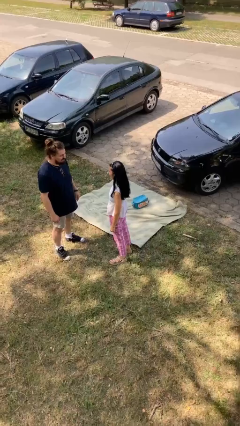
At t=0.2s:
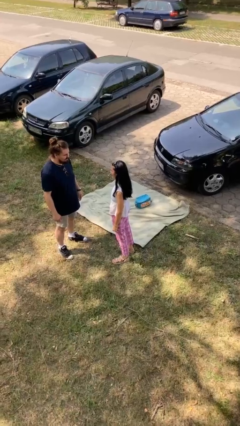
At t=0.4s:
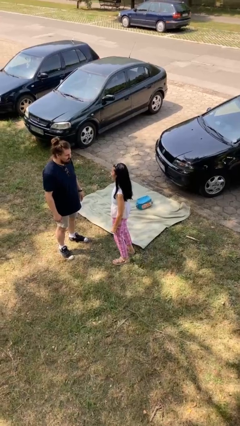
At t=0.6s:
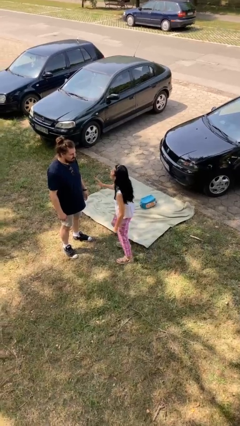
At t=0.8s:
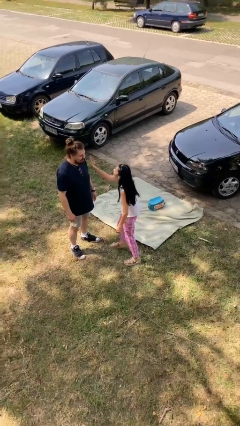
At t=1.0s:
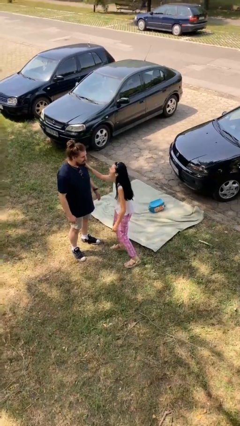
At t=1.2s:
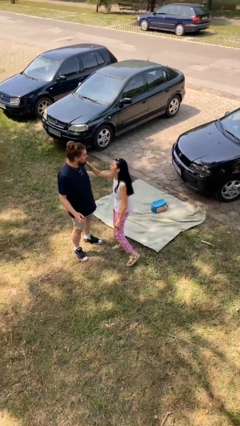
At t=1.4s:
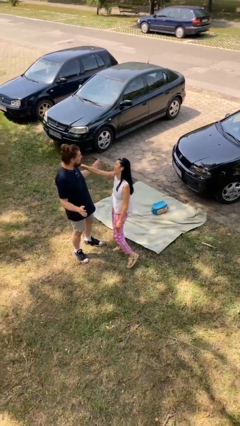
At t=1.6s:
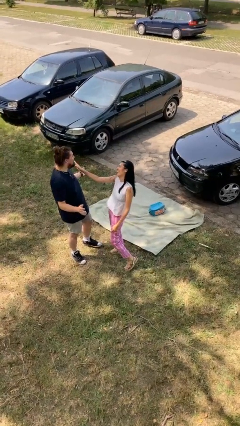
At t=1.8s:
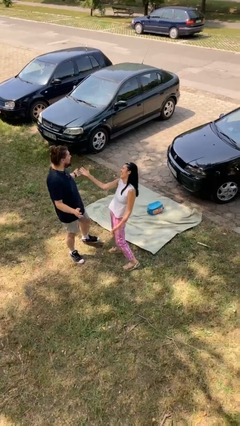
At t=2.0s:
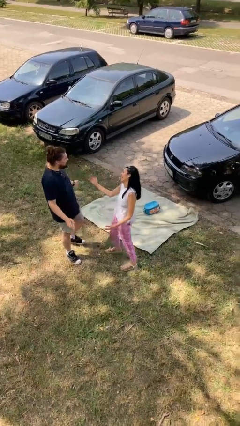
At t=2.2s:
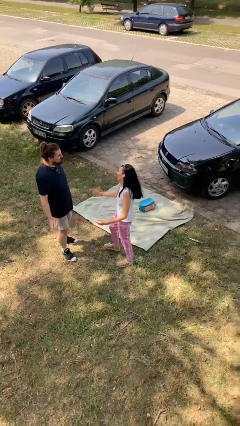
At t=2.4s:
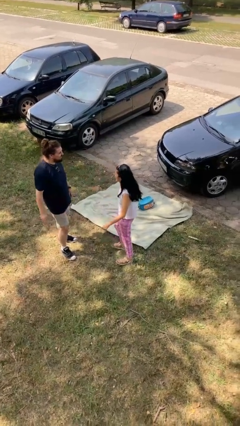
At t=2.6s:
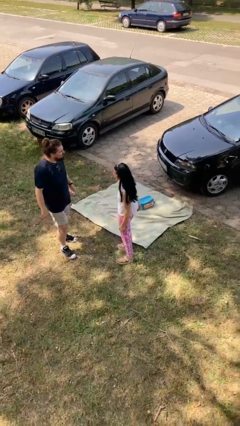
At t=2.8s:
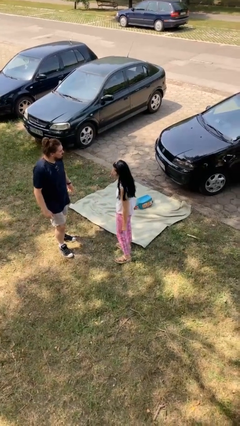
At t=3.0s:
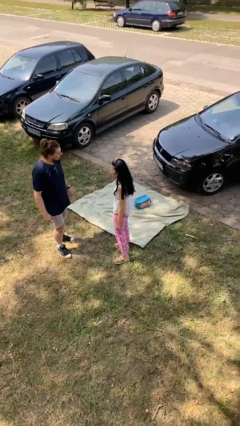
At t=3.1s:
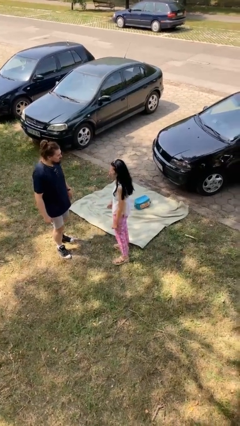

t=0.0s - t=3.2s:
person shoves person

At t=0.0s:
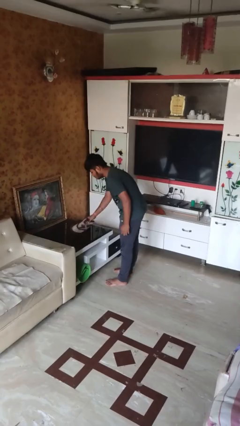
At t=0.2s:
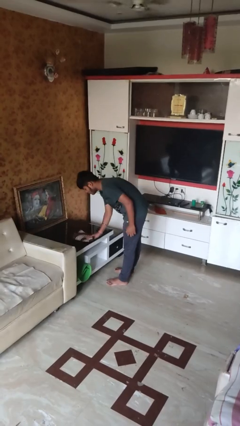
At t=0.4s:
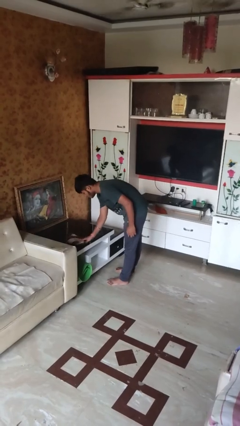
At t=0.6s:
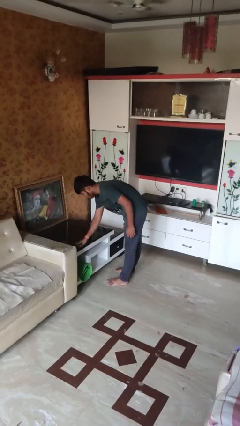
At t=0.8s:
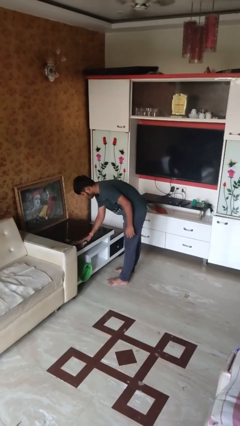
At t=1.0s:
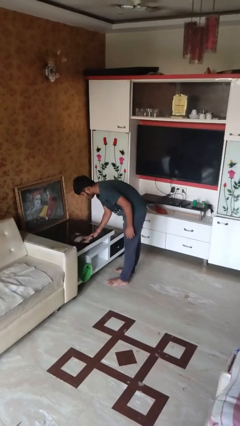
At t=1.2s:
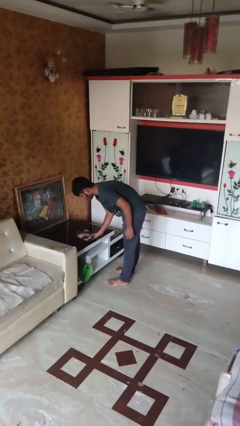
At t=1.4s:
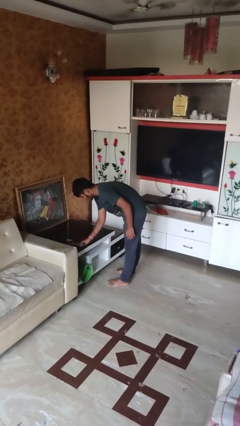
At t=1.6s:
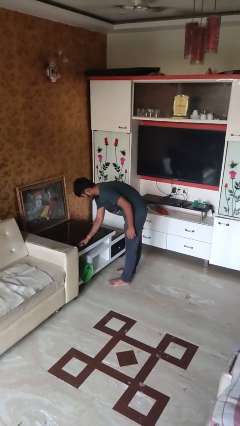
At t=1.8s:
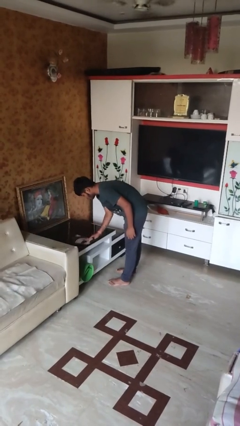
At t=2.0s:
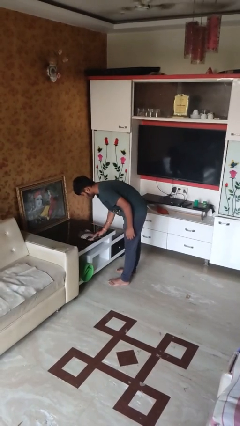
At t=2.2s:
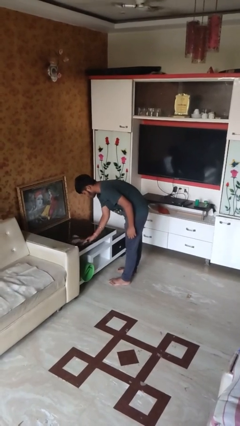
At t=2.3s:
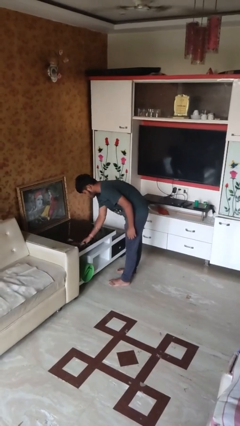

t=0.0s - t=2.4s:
person cleans table with rag

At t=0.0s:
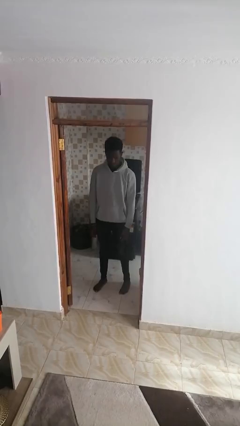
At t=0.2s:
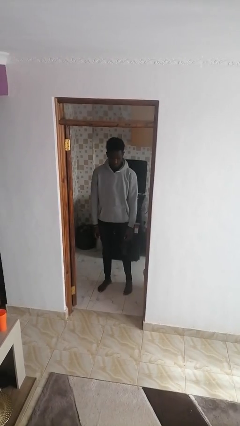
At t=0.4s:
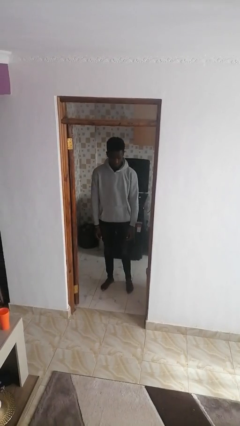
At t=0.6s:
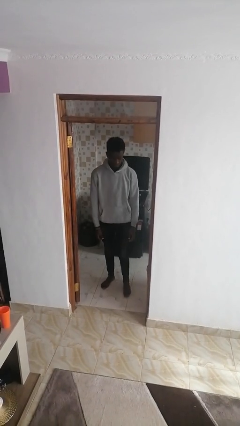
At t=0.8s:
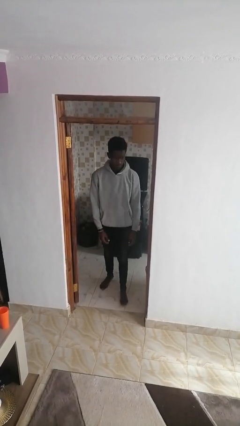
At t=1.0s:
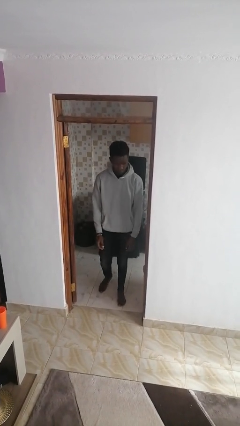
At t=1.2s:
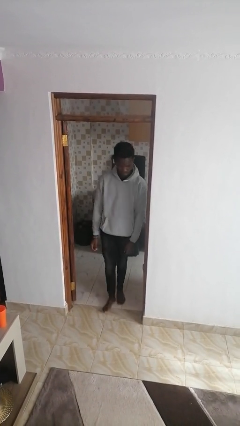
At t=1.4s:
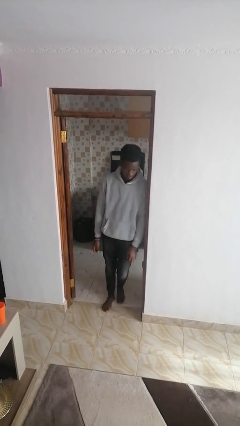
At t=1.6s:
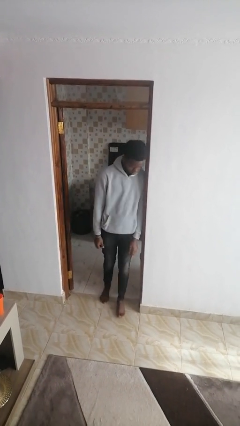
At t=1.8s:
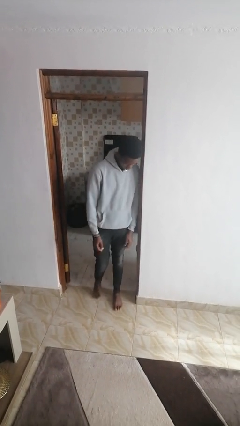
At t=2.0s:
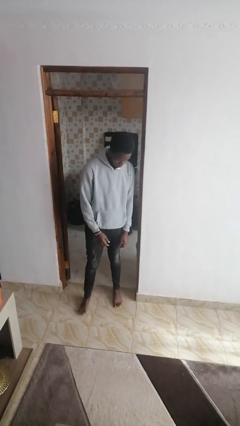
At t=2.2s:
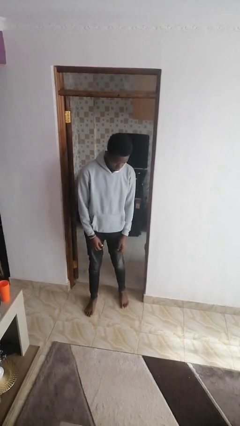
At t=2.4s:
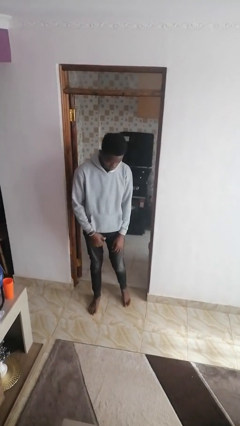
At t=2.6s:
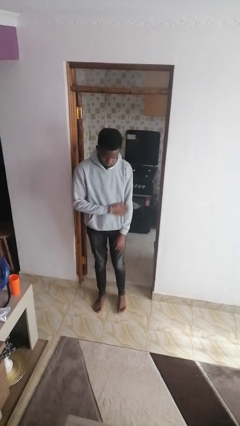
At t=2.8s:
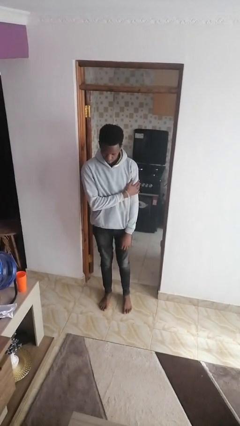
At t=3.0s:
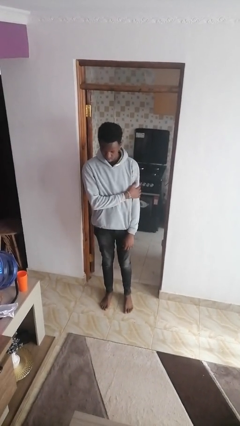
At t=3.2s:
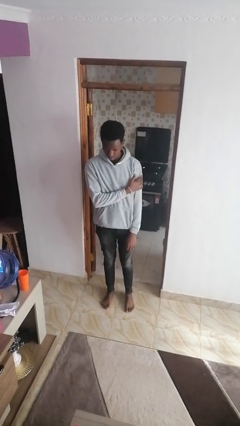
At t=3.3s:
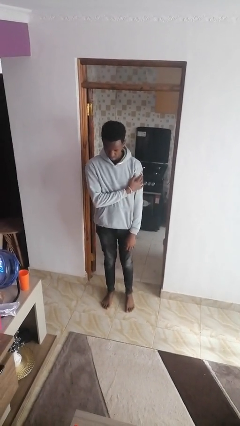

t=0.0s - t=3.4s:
person bumps into wall

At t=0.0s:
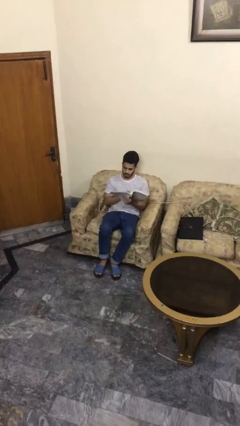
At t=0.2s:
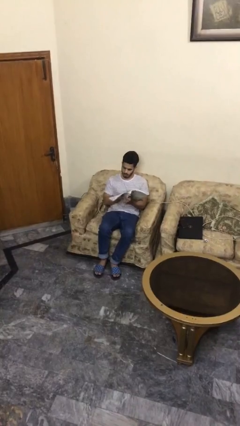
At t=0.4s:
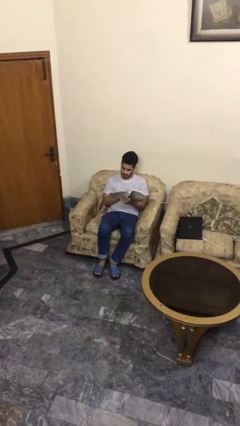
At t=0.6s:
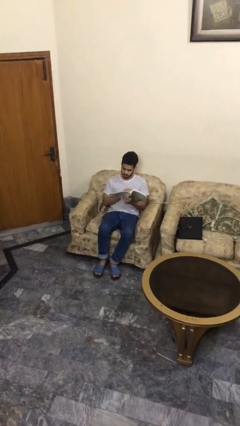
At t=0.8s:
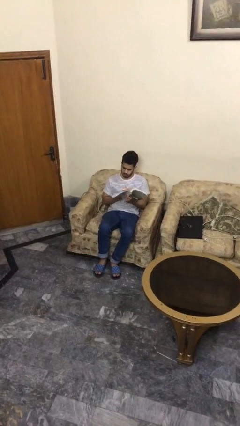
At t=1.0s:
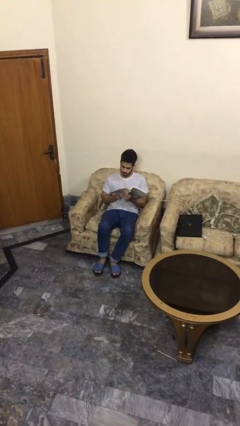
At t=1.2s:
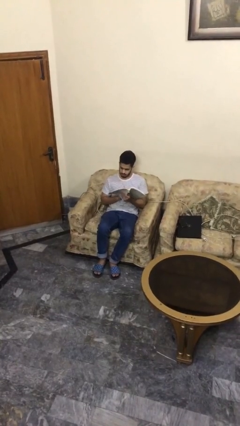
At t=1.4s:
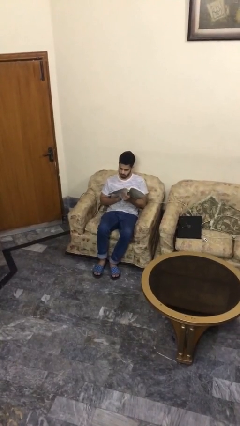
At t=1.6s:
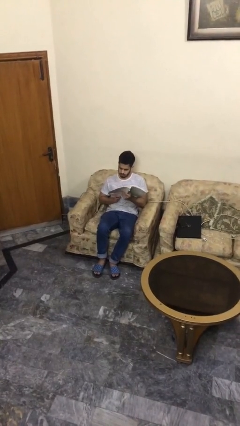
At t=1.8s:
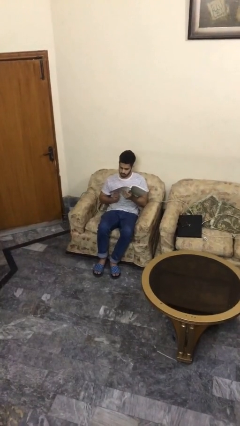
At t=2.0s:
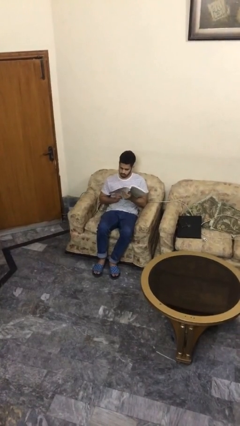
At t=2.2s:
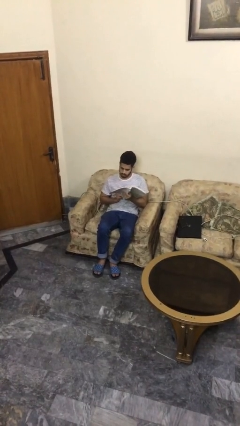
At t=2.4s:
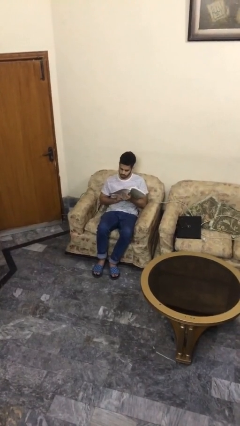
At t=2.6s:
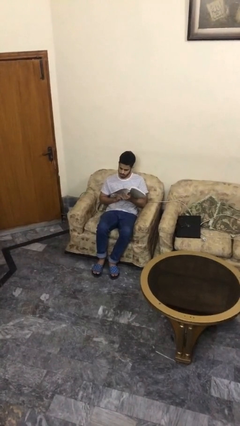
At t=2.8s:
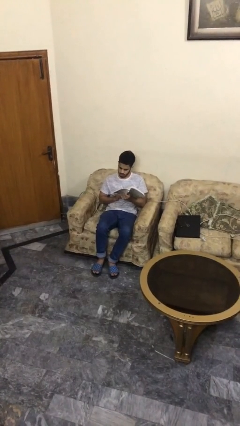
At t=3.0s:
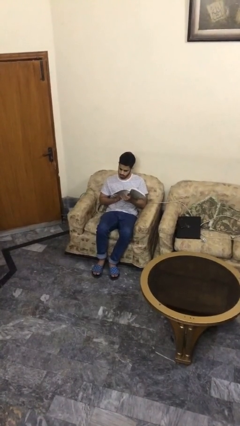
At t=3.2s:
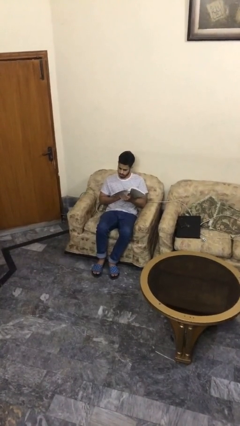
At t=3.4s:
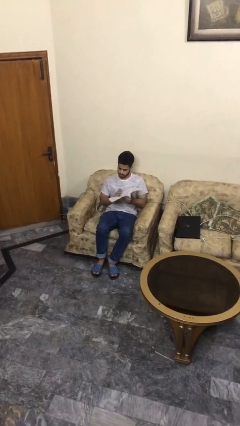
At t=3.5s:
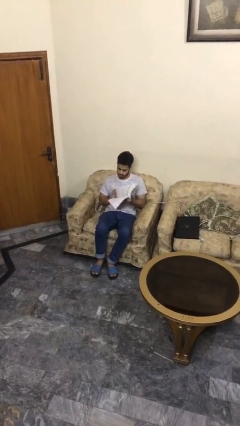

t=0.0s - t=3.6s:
person reads document

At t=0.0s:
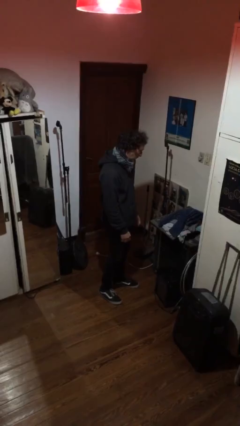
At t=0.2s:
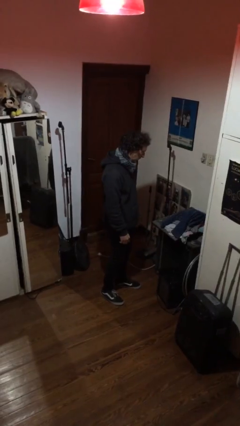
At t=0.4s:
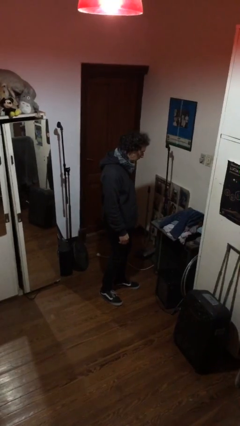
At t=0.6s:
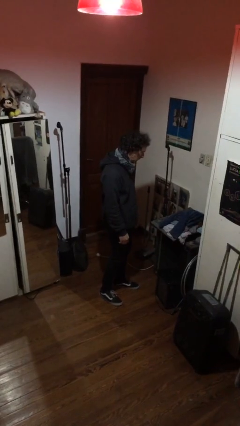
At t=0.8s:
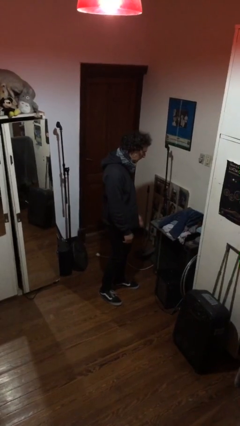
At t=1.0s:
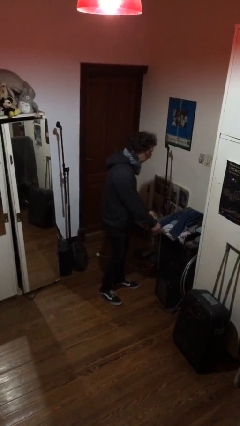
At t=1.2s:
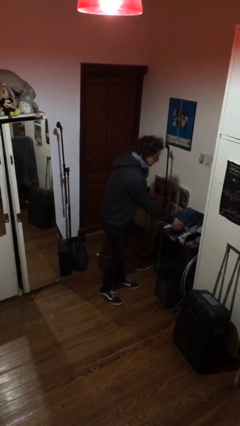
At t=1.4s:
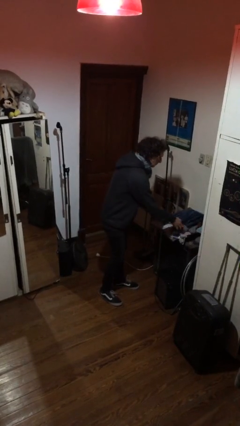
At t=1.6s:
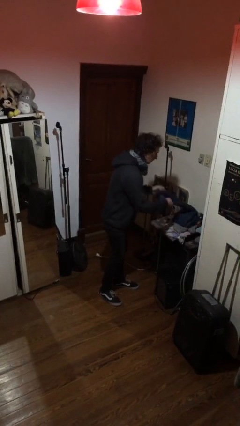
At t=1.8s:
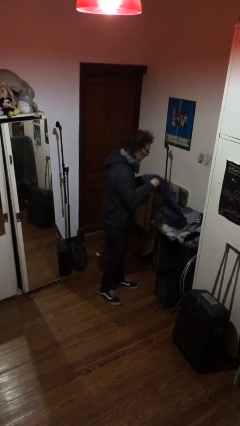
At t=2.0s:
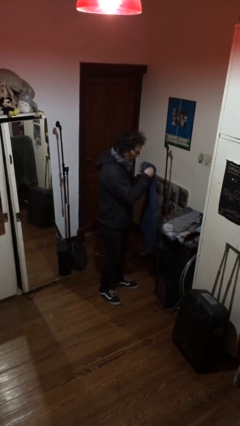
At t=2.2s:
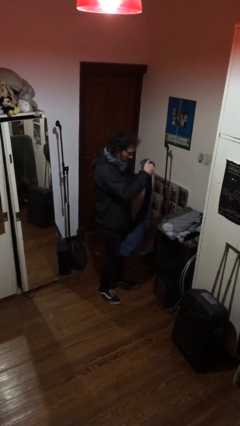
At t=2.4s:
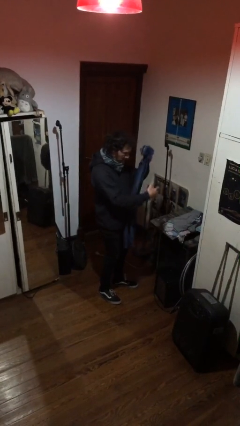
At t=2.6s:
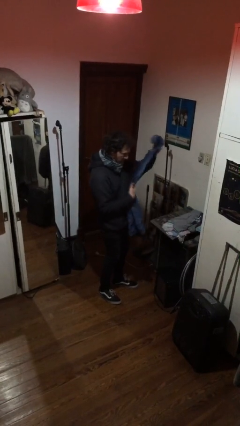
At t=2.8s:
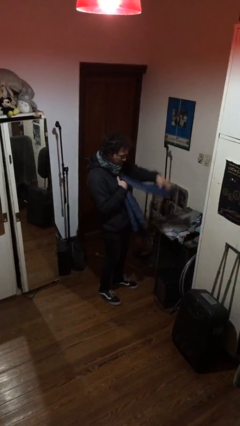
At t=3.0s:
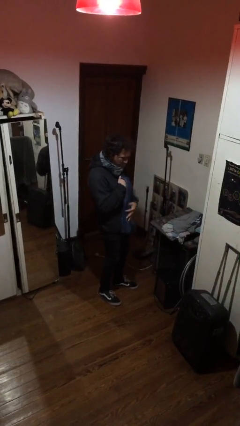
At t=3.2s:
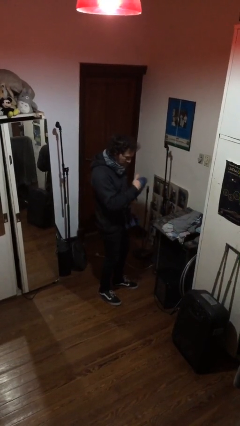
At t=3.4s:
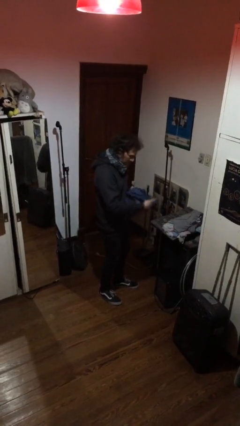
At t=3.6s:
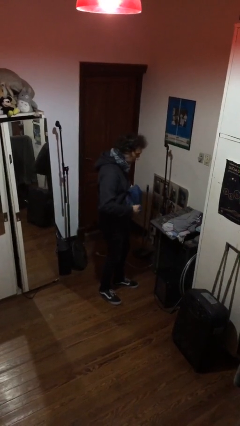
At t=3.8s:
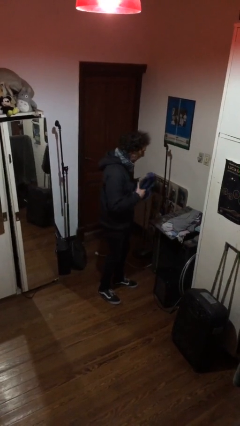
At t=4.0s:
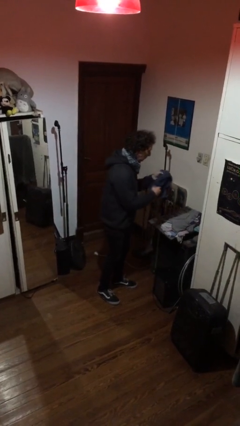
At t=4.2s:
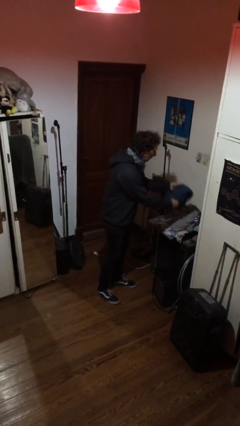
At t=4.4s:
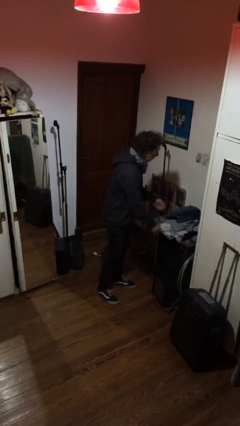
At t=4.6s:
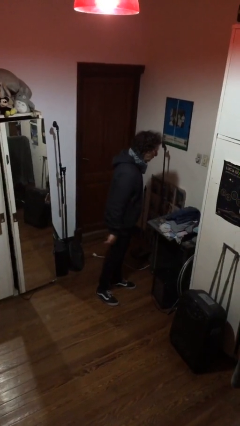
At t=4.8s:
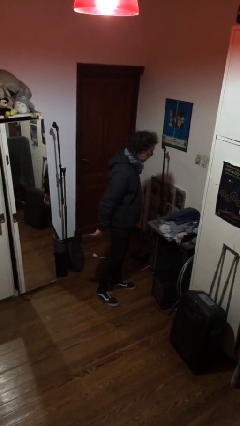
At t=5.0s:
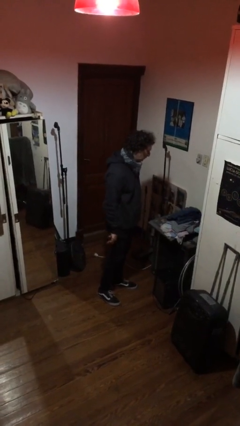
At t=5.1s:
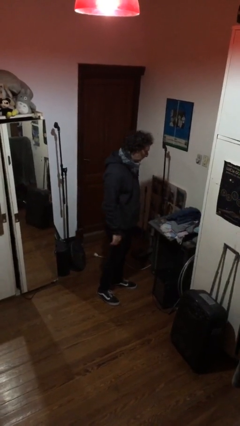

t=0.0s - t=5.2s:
person folds pants
